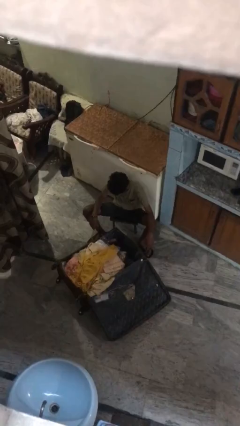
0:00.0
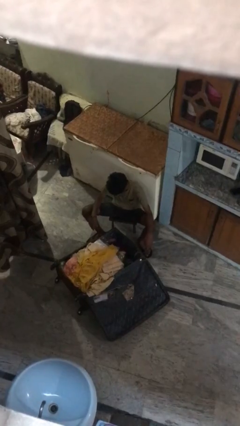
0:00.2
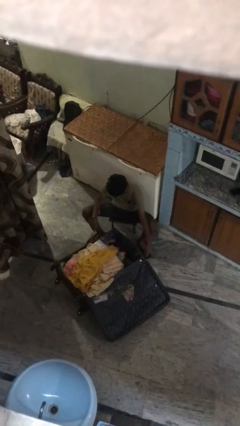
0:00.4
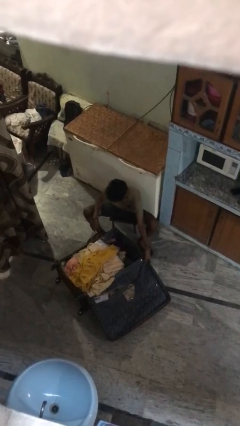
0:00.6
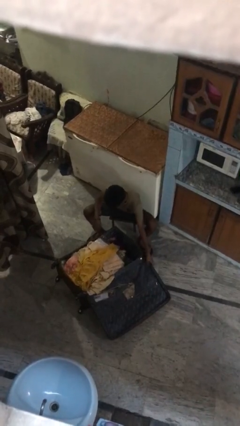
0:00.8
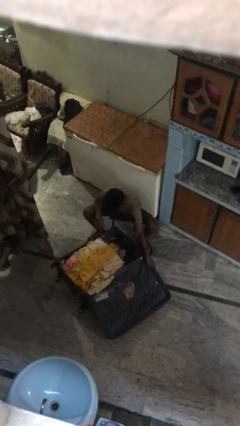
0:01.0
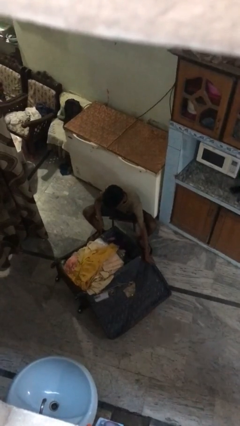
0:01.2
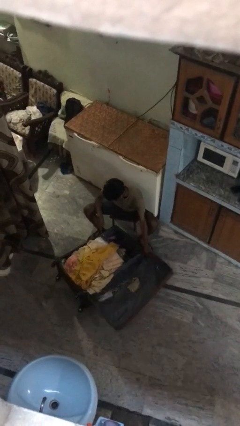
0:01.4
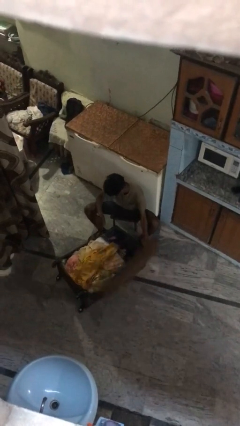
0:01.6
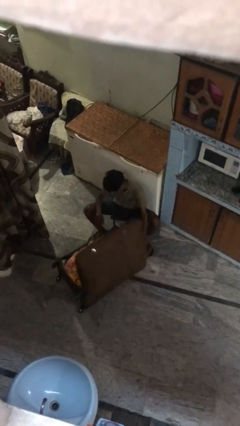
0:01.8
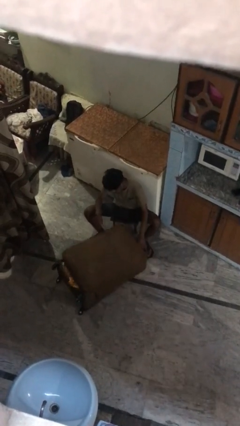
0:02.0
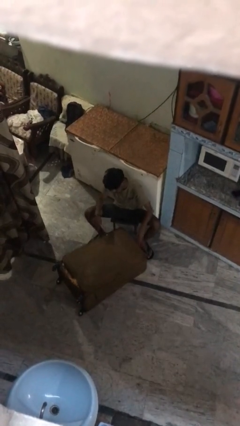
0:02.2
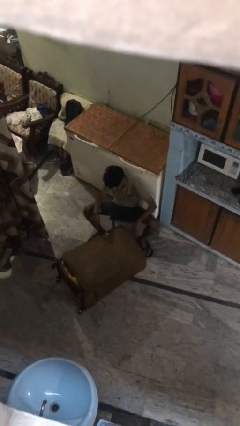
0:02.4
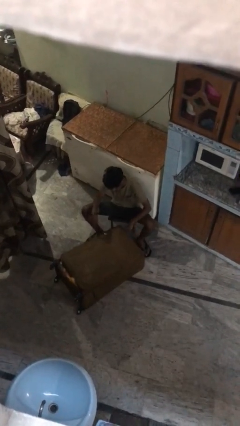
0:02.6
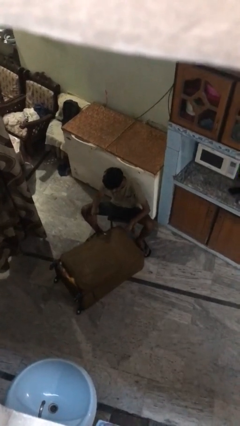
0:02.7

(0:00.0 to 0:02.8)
person closes suitcase

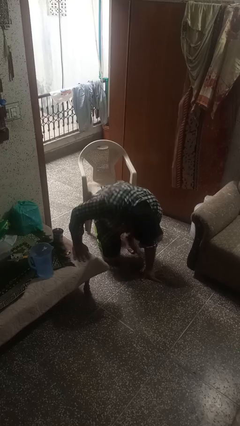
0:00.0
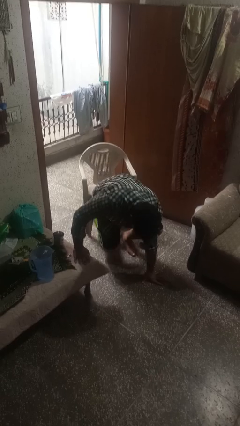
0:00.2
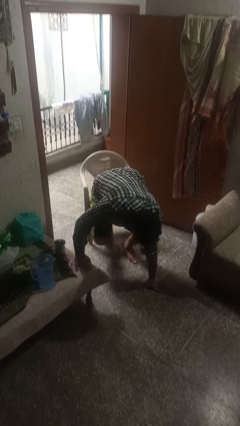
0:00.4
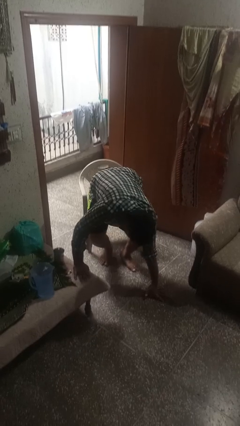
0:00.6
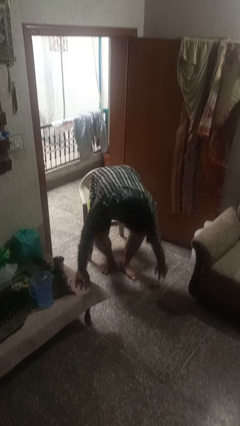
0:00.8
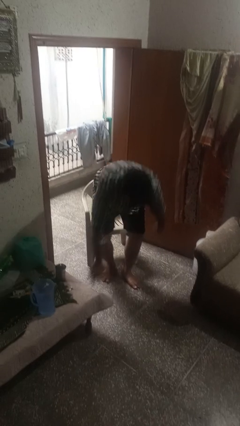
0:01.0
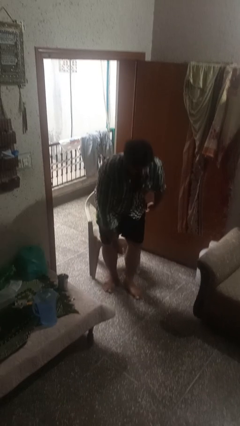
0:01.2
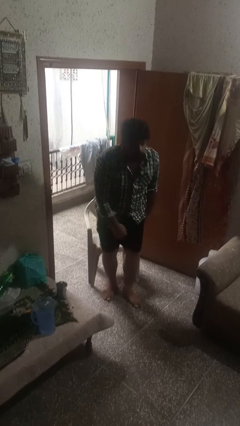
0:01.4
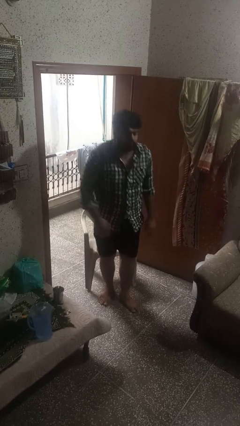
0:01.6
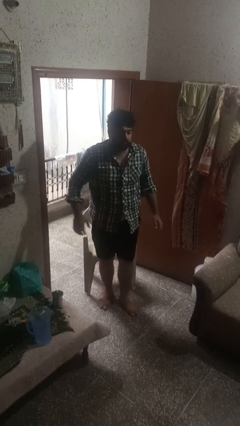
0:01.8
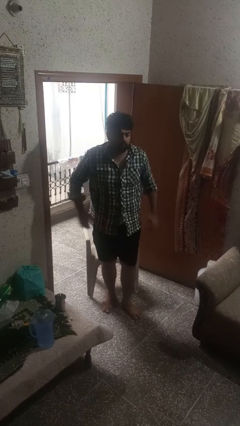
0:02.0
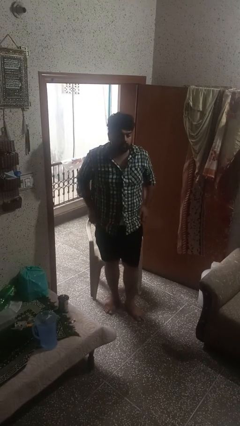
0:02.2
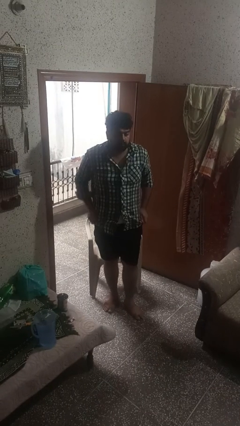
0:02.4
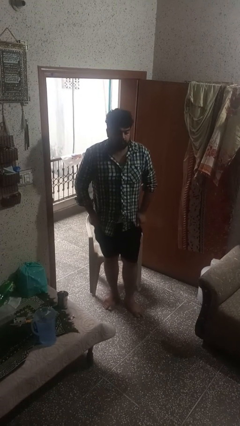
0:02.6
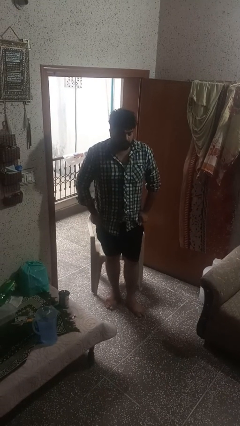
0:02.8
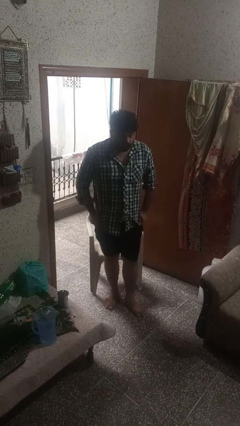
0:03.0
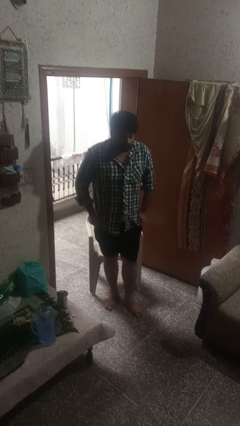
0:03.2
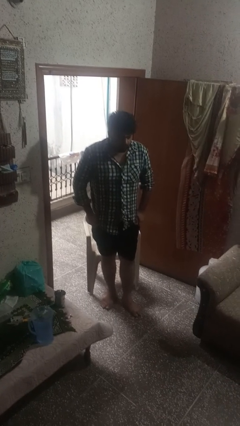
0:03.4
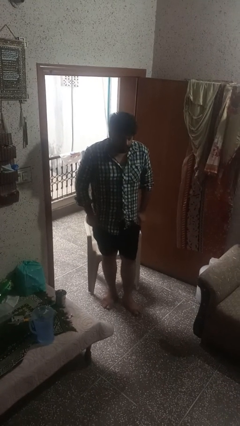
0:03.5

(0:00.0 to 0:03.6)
person stands up from floor

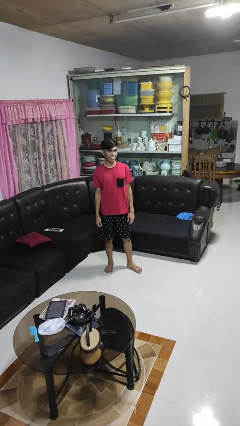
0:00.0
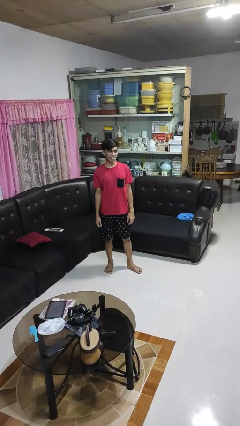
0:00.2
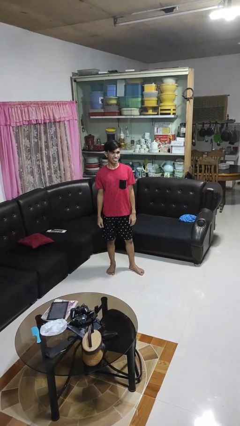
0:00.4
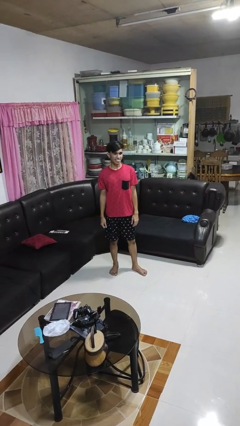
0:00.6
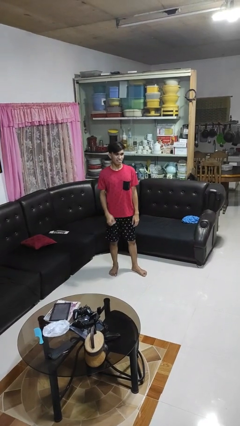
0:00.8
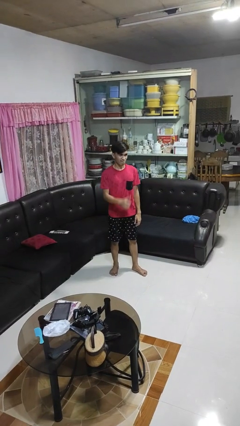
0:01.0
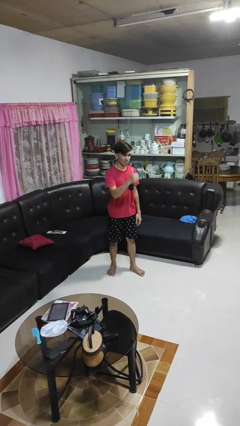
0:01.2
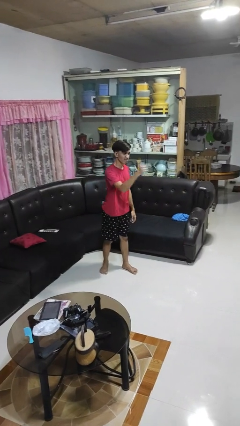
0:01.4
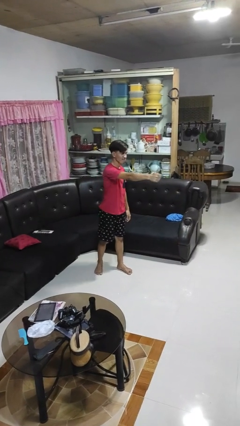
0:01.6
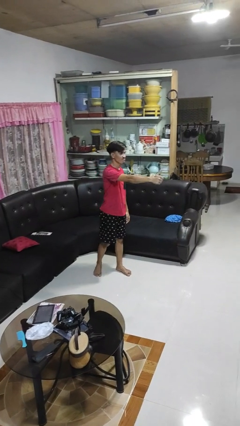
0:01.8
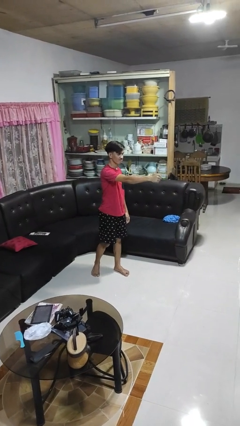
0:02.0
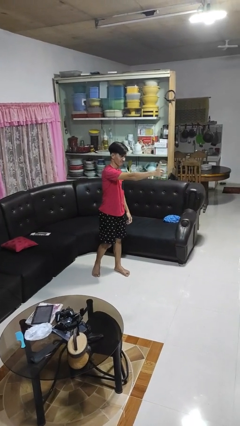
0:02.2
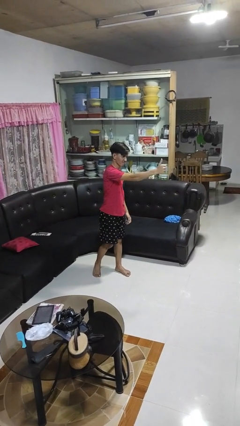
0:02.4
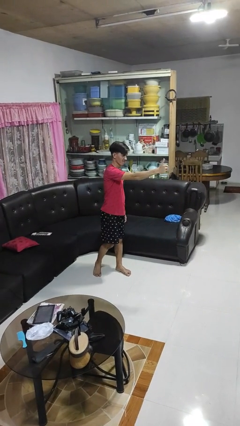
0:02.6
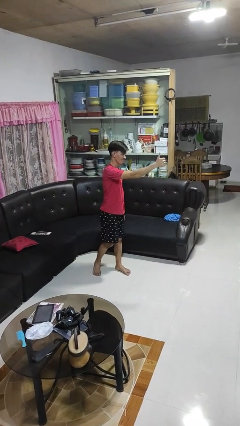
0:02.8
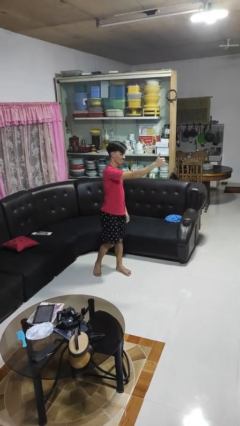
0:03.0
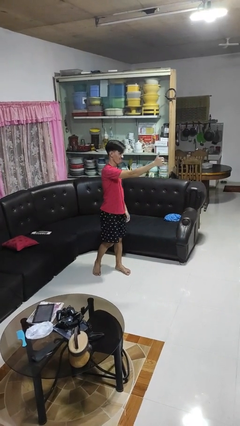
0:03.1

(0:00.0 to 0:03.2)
person gestures thumbs up

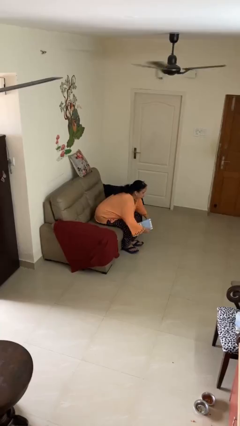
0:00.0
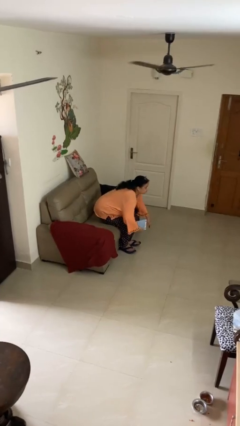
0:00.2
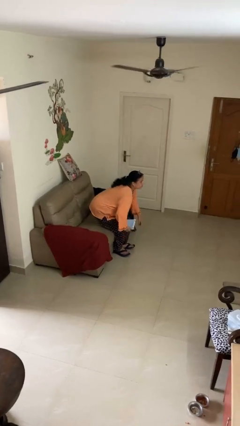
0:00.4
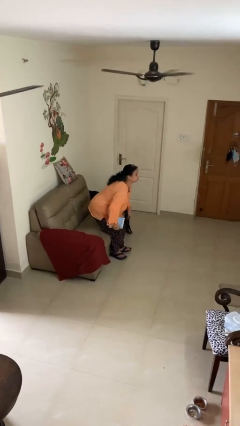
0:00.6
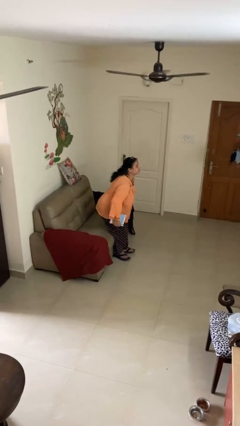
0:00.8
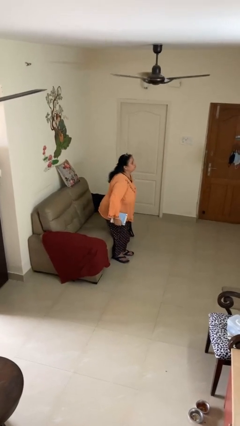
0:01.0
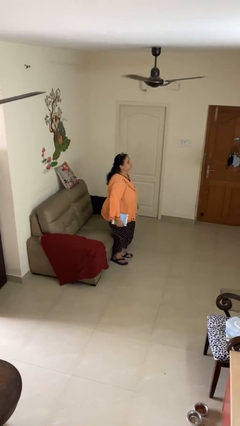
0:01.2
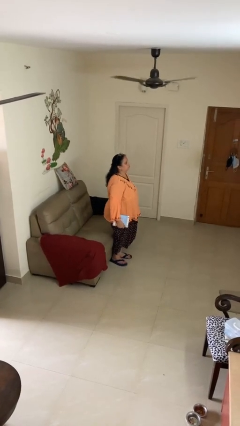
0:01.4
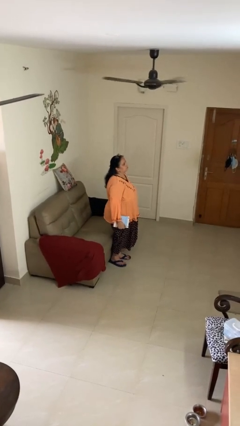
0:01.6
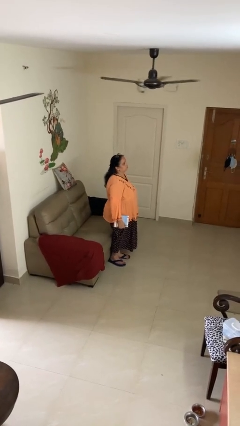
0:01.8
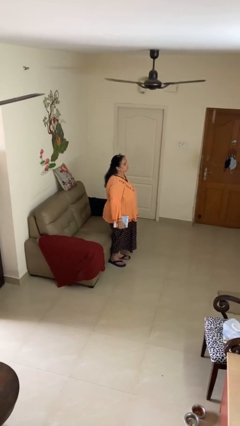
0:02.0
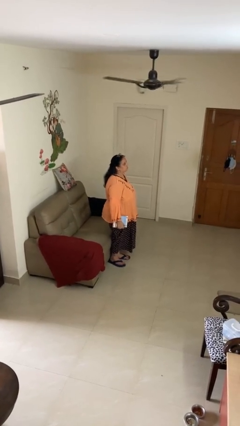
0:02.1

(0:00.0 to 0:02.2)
person stands up

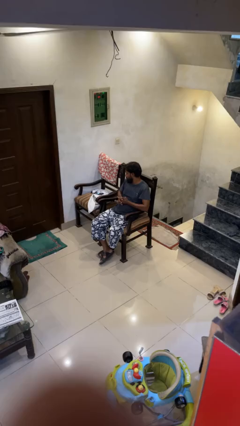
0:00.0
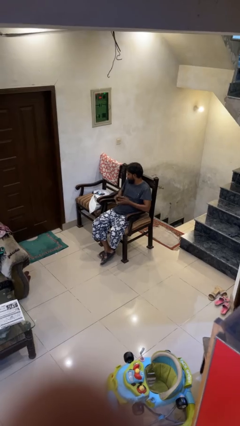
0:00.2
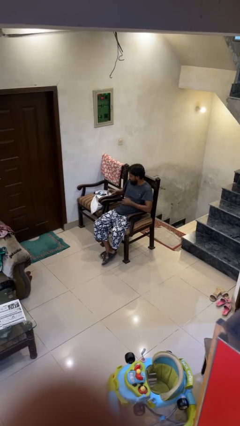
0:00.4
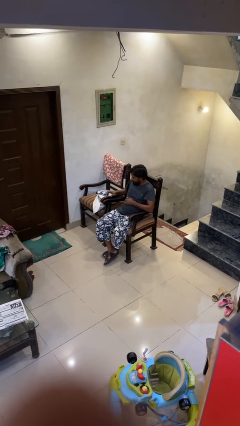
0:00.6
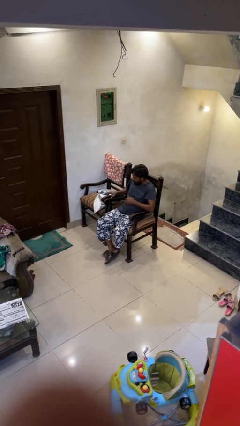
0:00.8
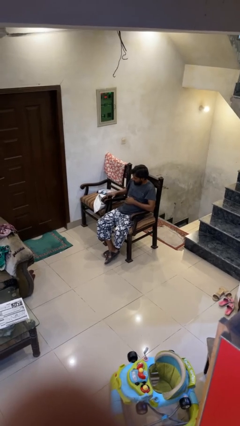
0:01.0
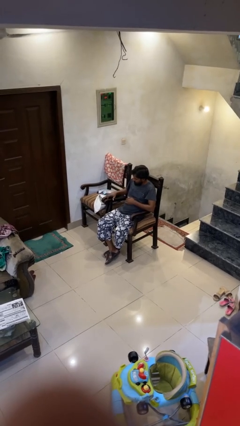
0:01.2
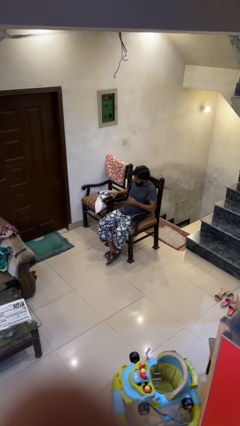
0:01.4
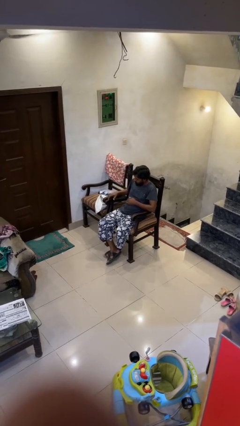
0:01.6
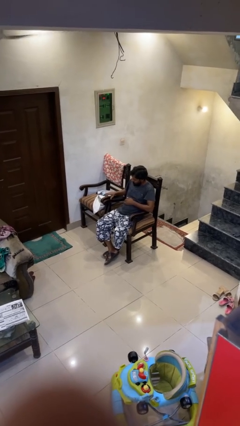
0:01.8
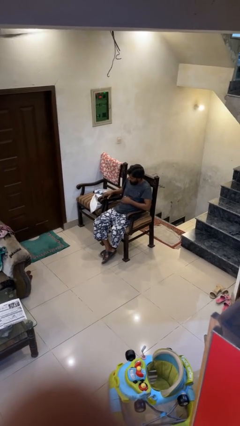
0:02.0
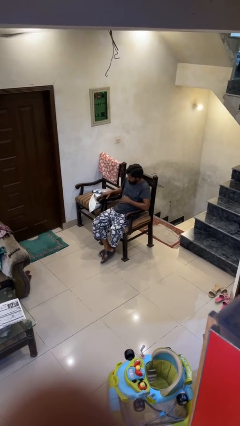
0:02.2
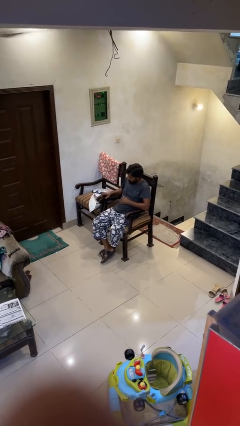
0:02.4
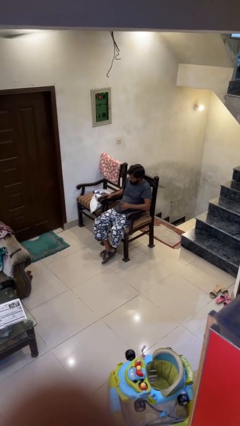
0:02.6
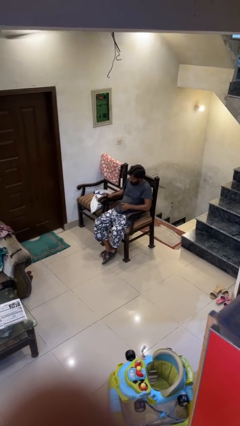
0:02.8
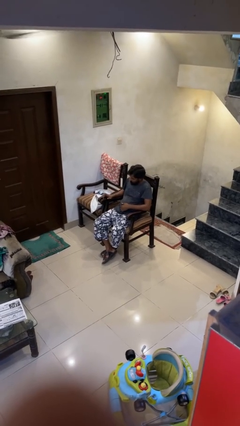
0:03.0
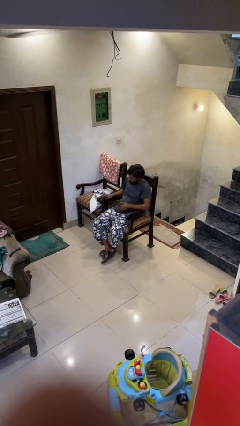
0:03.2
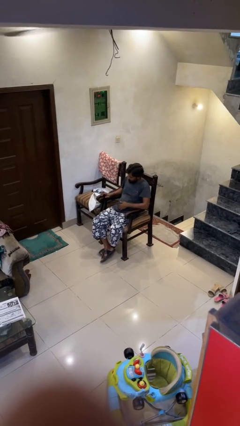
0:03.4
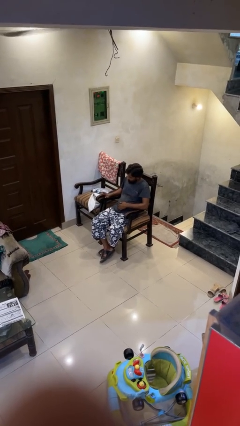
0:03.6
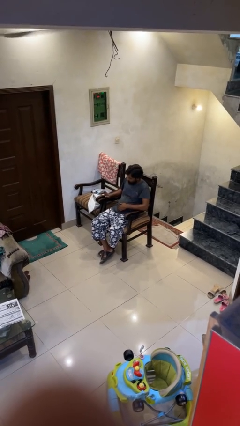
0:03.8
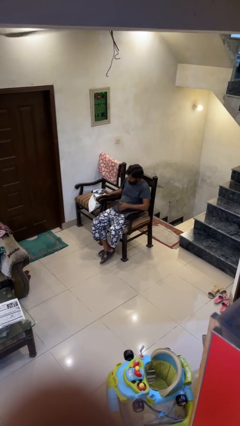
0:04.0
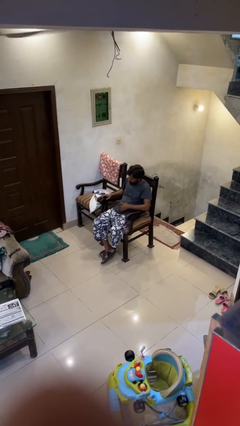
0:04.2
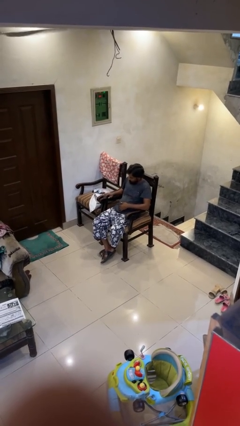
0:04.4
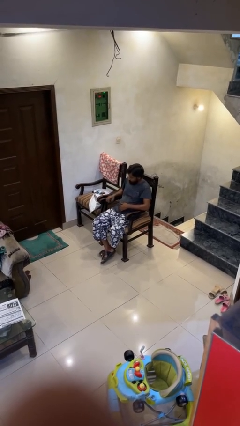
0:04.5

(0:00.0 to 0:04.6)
person taps object with finger

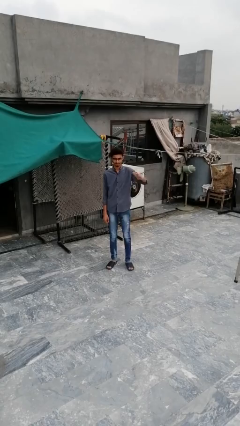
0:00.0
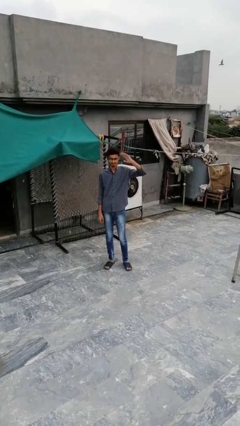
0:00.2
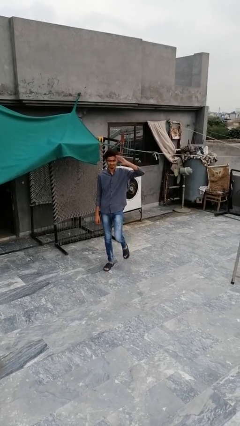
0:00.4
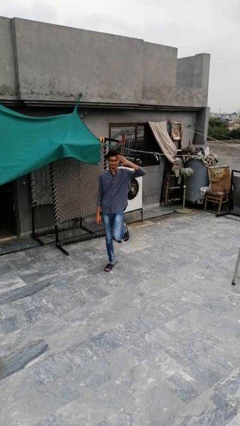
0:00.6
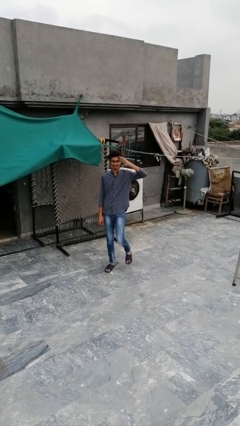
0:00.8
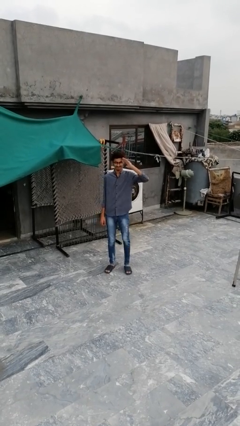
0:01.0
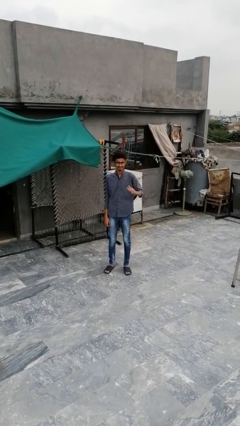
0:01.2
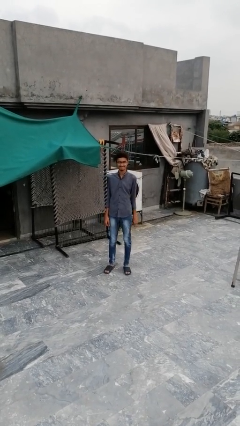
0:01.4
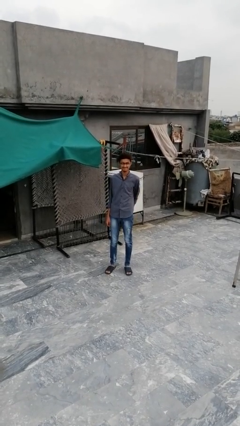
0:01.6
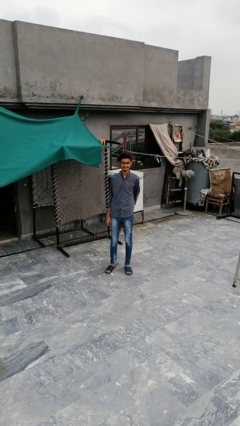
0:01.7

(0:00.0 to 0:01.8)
person salutes
